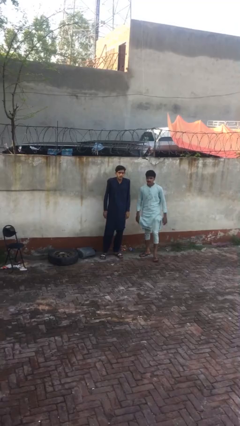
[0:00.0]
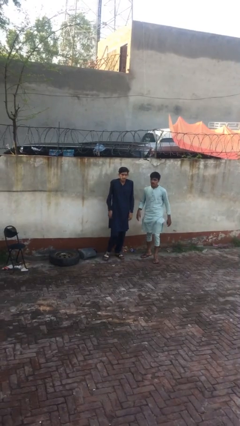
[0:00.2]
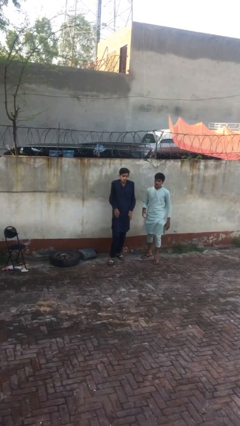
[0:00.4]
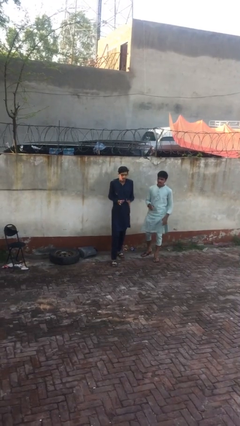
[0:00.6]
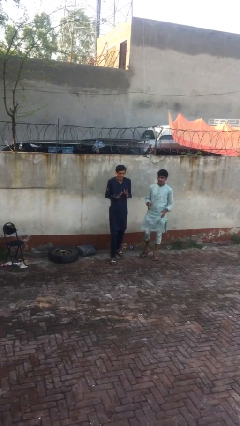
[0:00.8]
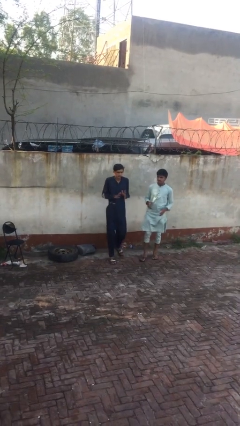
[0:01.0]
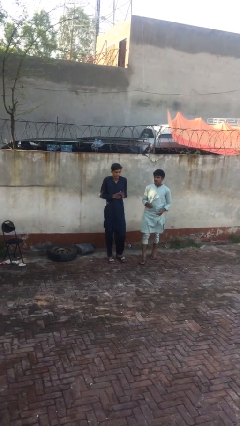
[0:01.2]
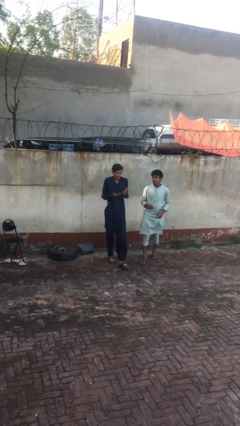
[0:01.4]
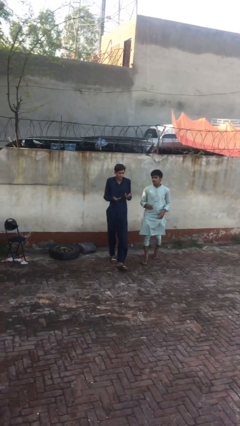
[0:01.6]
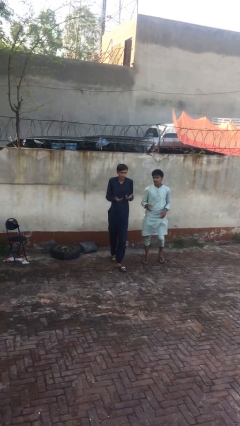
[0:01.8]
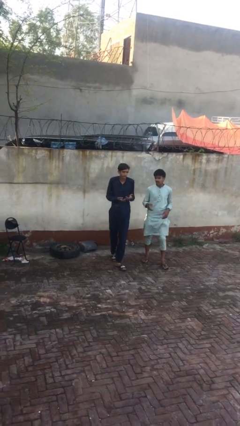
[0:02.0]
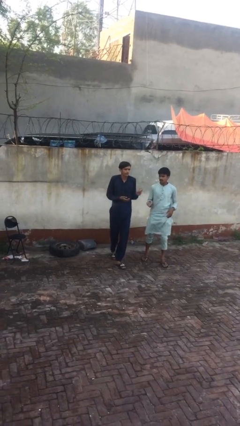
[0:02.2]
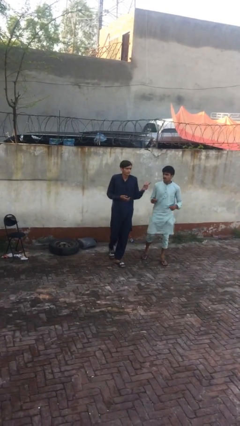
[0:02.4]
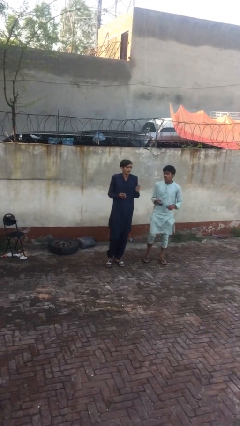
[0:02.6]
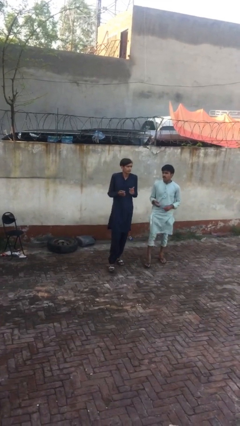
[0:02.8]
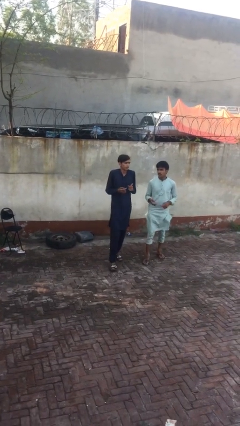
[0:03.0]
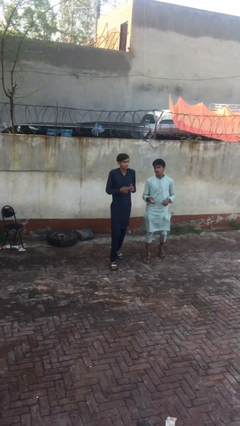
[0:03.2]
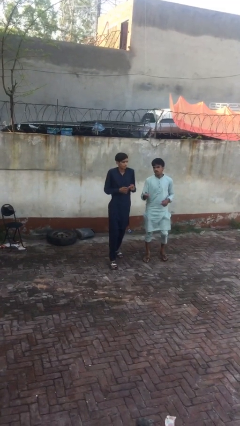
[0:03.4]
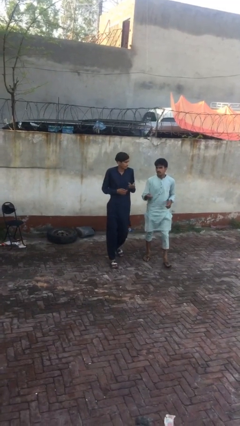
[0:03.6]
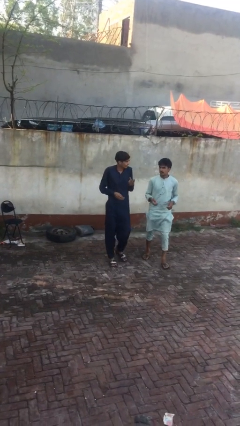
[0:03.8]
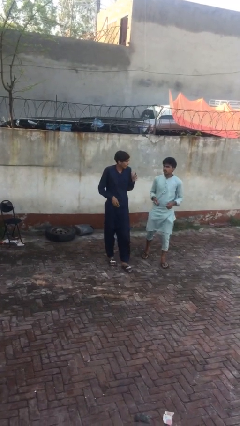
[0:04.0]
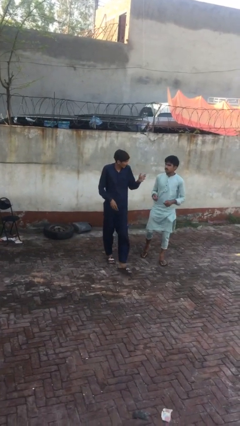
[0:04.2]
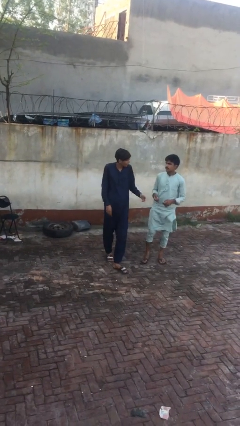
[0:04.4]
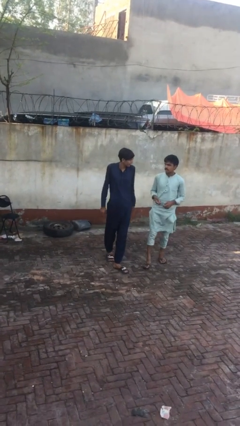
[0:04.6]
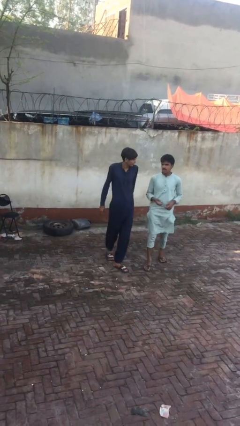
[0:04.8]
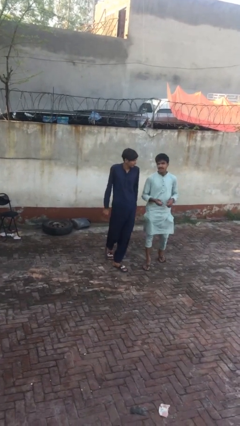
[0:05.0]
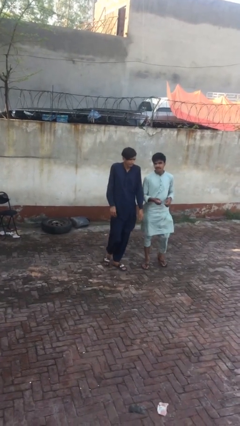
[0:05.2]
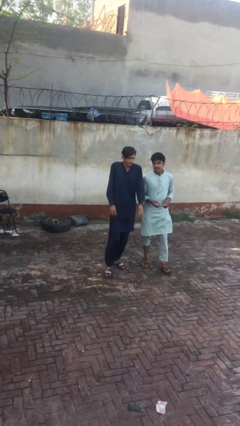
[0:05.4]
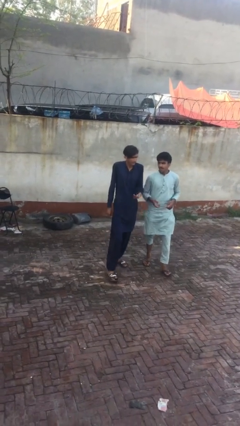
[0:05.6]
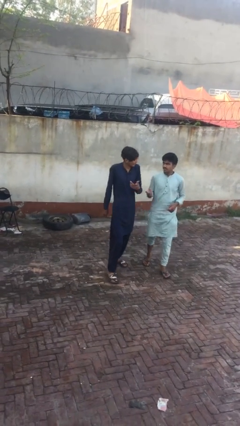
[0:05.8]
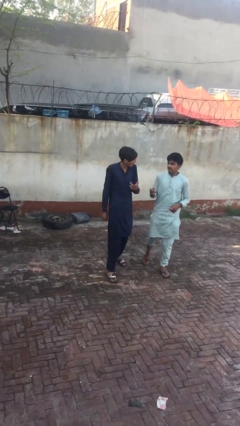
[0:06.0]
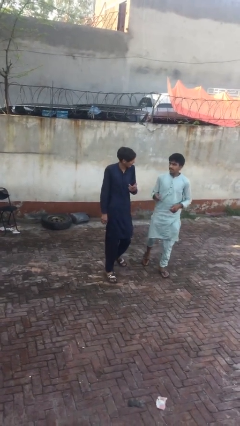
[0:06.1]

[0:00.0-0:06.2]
person talks to person

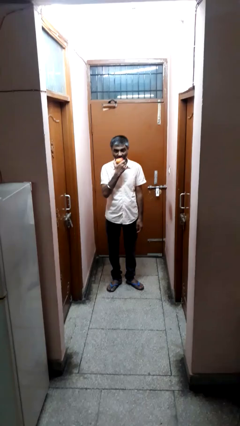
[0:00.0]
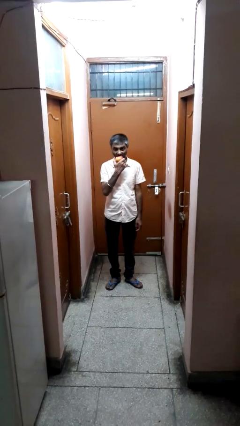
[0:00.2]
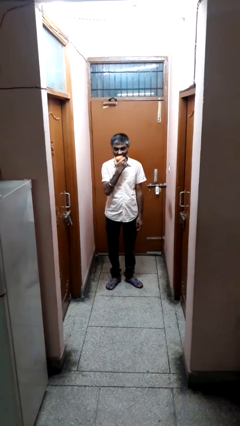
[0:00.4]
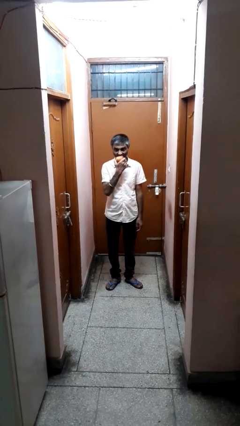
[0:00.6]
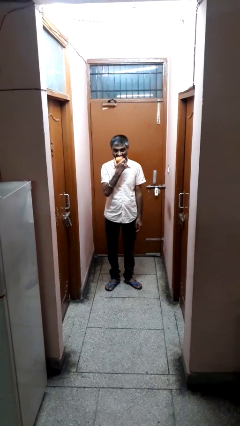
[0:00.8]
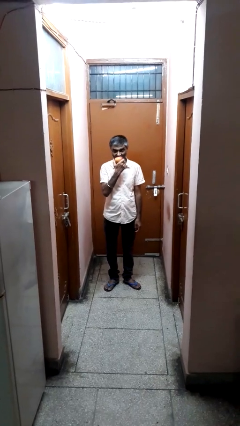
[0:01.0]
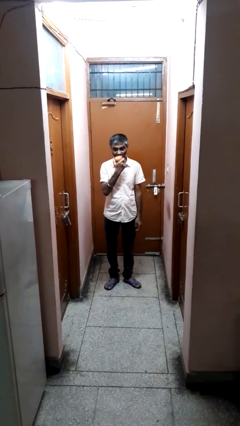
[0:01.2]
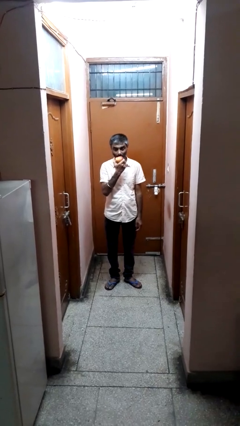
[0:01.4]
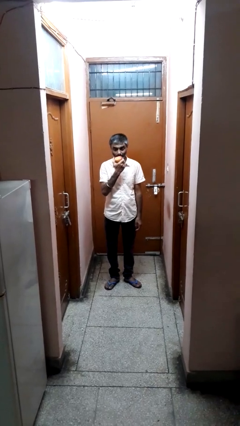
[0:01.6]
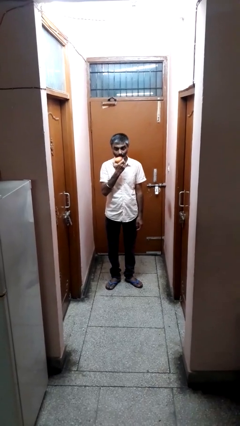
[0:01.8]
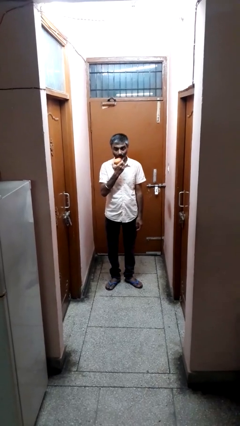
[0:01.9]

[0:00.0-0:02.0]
person eats apple

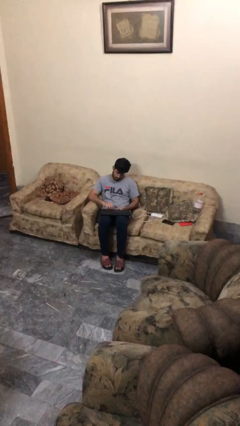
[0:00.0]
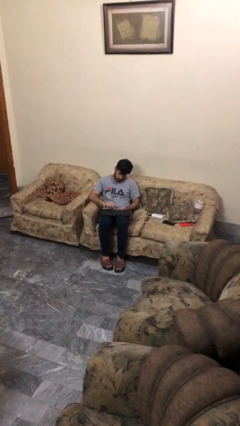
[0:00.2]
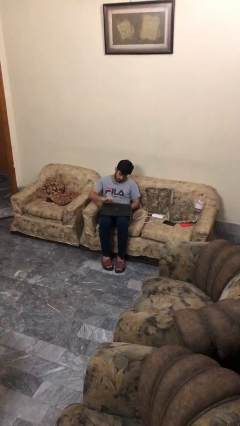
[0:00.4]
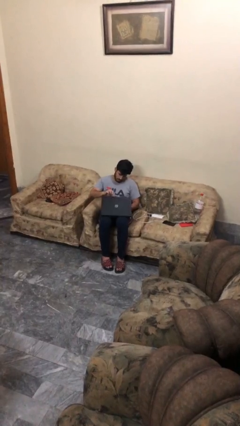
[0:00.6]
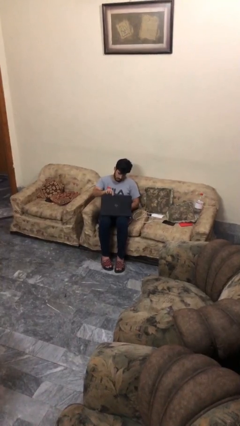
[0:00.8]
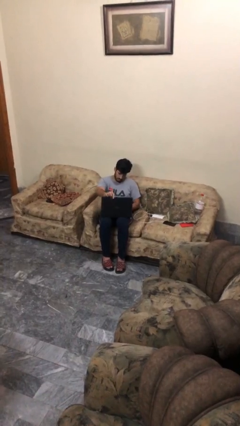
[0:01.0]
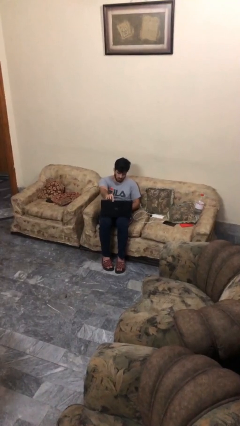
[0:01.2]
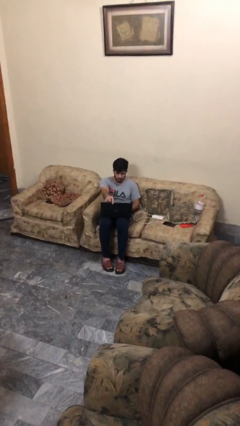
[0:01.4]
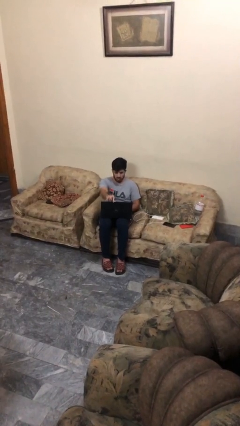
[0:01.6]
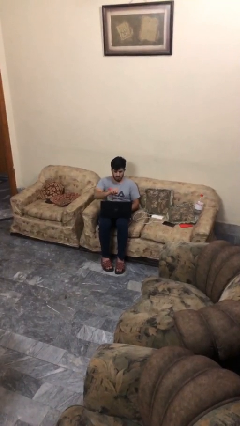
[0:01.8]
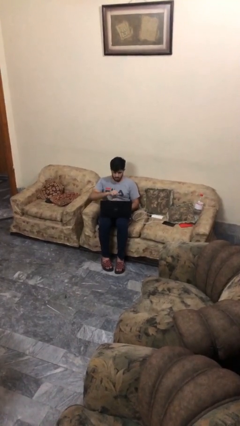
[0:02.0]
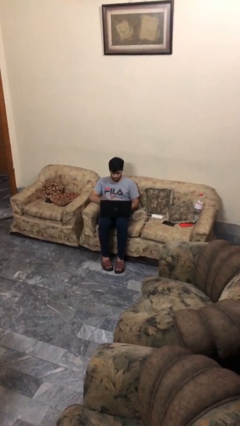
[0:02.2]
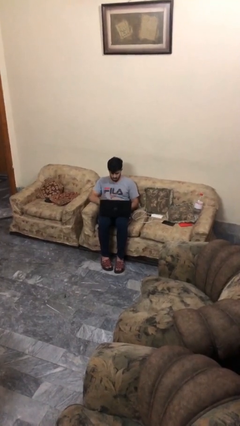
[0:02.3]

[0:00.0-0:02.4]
person opens laptop

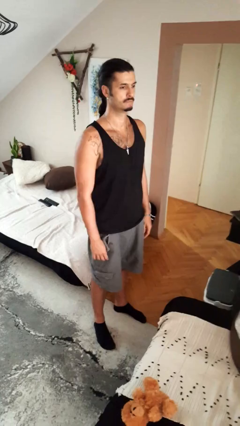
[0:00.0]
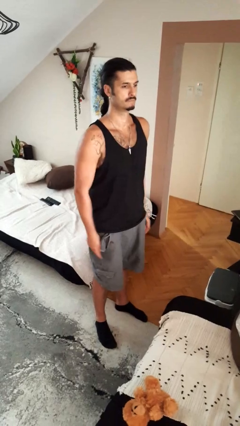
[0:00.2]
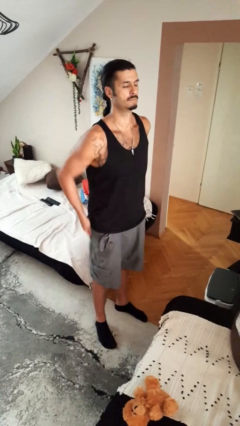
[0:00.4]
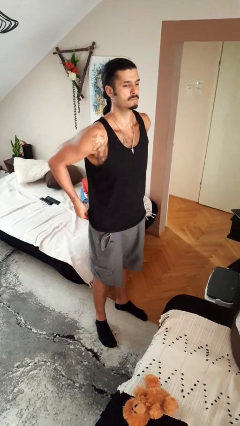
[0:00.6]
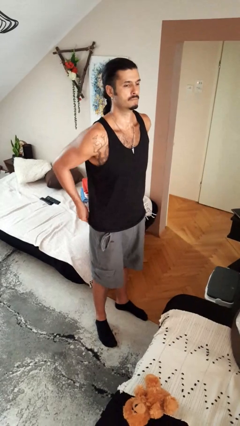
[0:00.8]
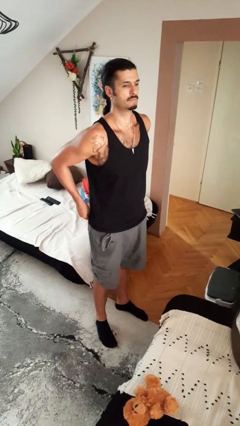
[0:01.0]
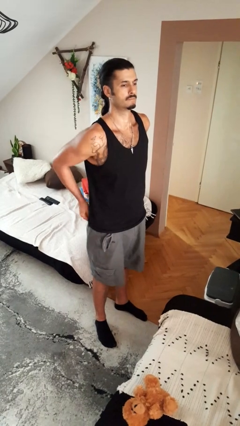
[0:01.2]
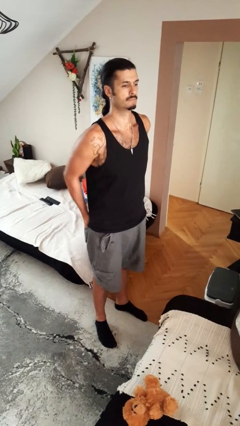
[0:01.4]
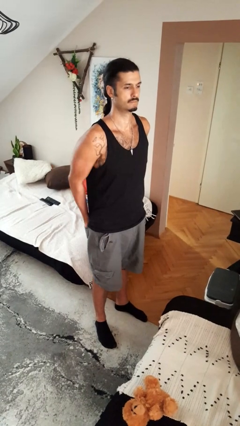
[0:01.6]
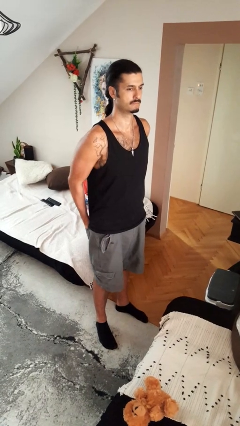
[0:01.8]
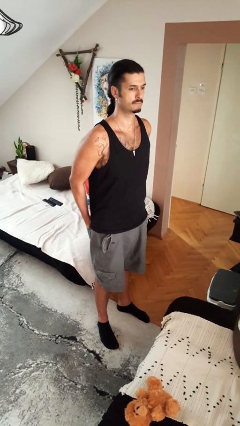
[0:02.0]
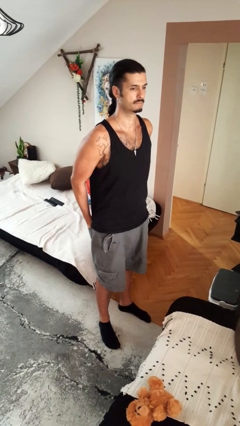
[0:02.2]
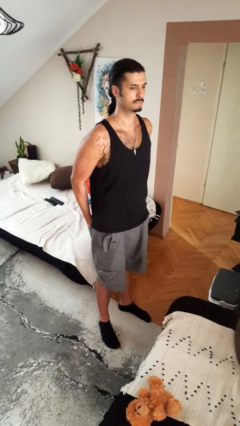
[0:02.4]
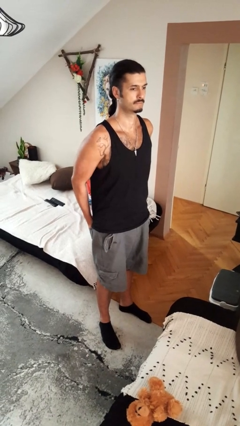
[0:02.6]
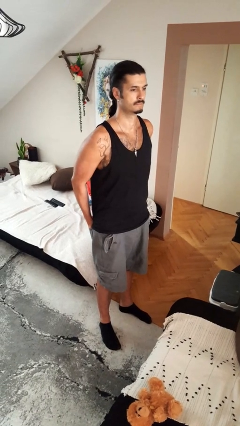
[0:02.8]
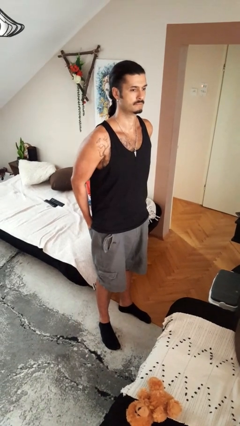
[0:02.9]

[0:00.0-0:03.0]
person puts hands in back pockets

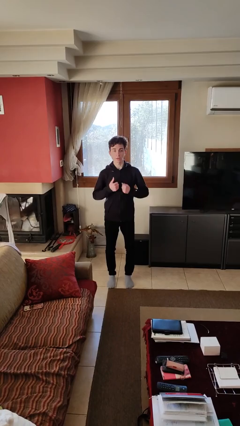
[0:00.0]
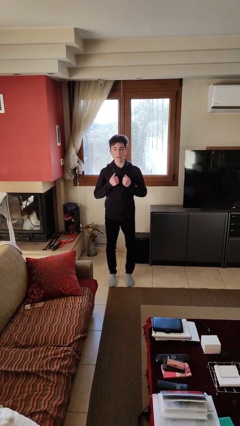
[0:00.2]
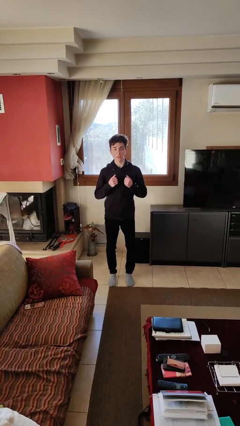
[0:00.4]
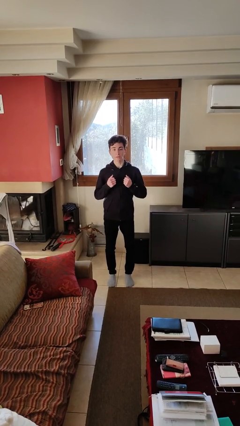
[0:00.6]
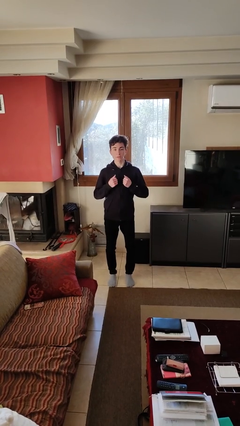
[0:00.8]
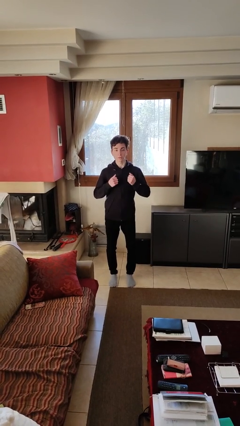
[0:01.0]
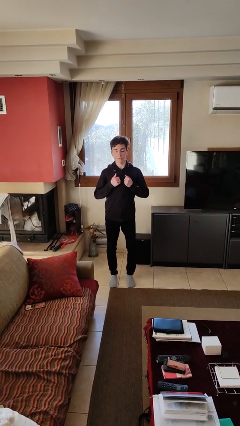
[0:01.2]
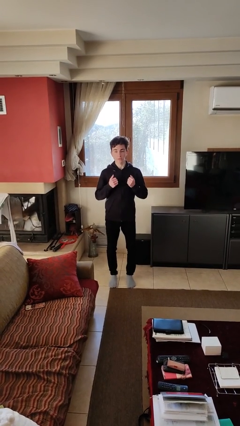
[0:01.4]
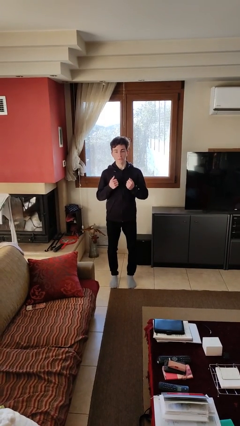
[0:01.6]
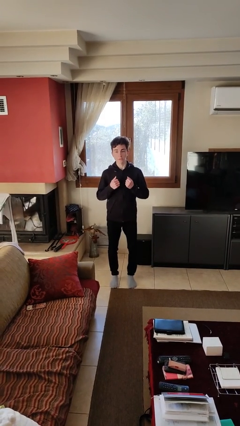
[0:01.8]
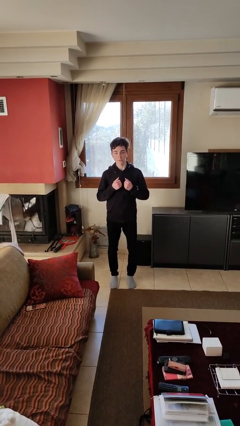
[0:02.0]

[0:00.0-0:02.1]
person drums on chest

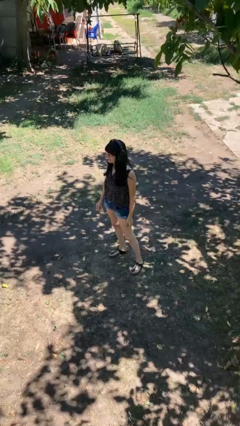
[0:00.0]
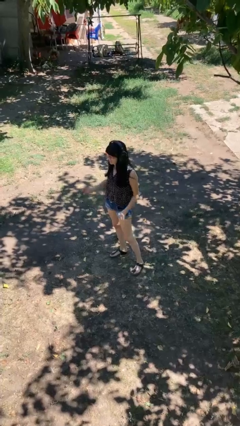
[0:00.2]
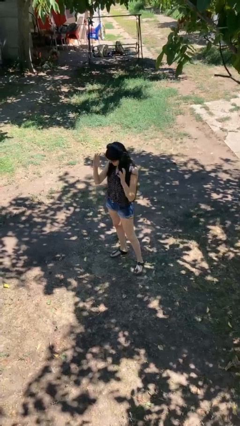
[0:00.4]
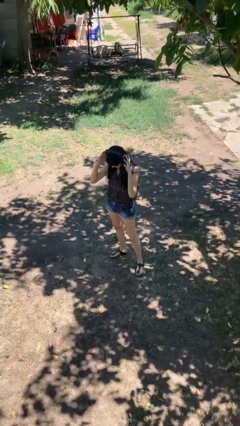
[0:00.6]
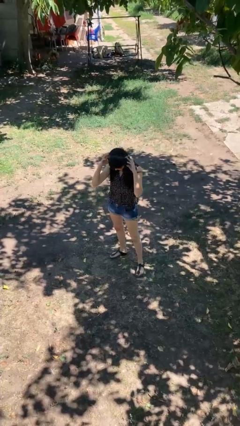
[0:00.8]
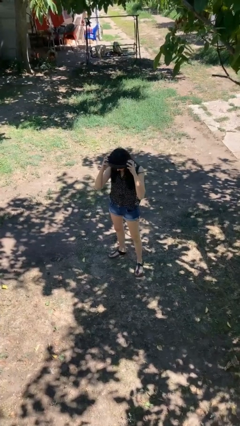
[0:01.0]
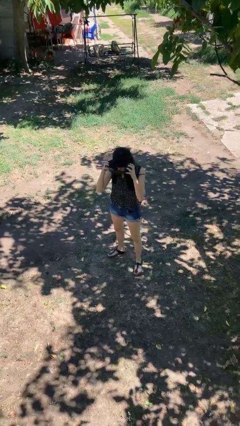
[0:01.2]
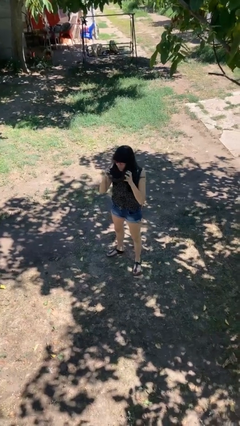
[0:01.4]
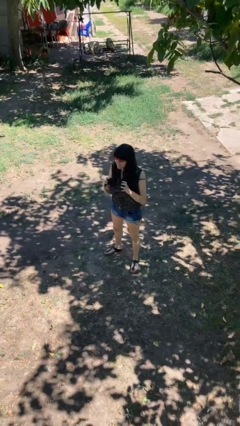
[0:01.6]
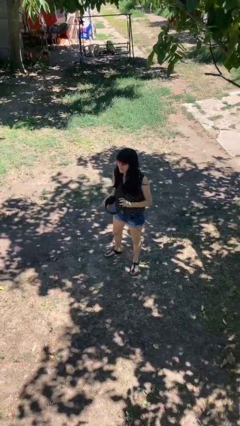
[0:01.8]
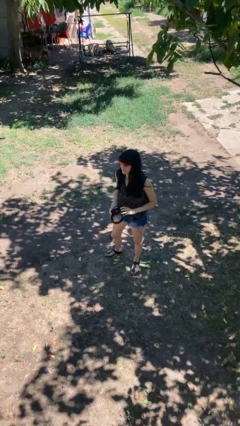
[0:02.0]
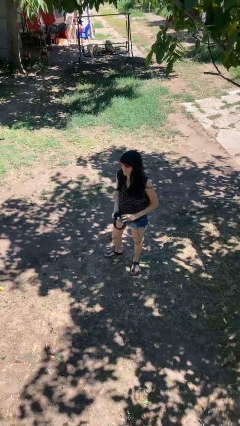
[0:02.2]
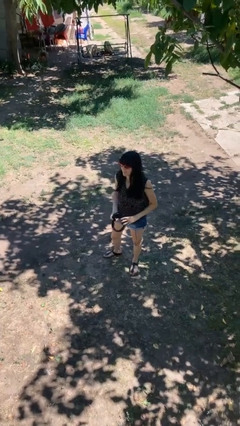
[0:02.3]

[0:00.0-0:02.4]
person takes off headphones
